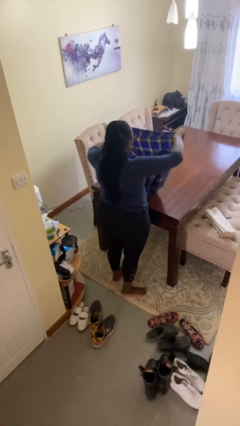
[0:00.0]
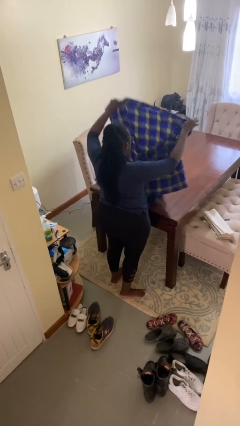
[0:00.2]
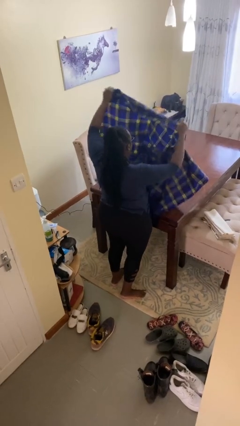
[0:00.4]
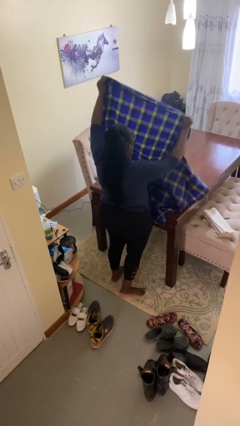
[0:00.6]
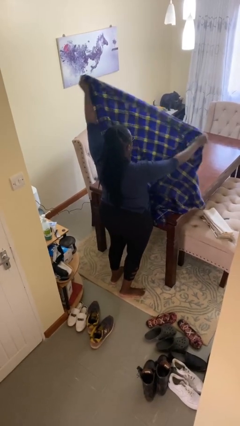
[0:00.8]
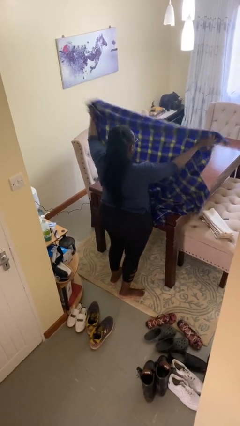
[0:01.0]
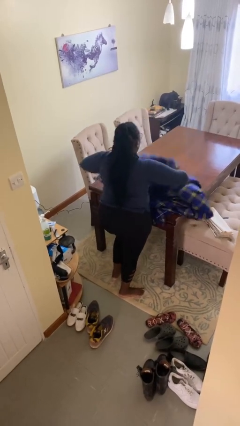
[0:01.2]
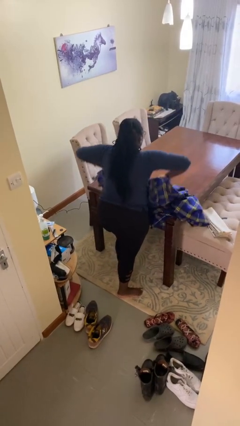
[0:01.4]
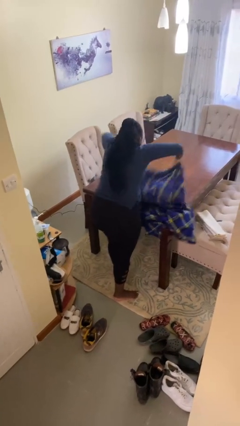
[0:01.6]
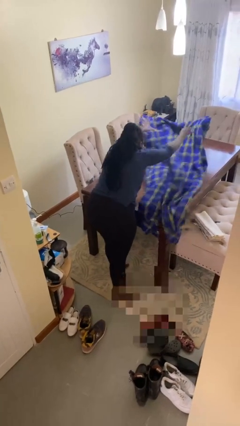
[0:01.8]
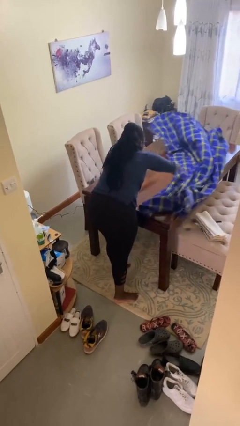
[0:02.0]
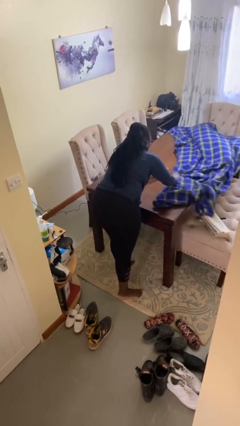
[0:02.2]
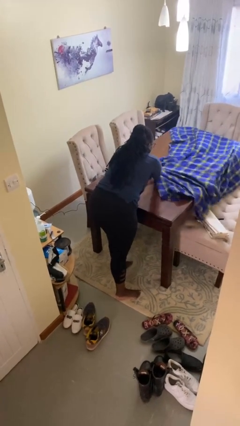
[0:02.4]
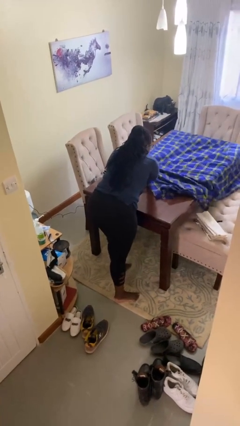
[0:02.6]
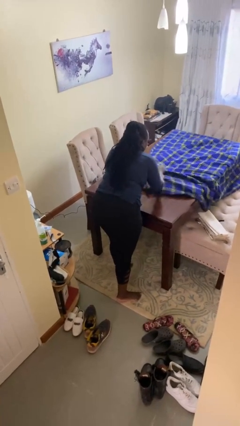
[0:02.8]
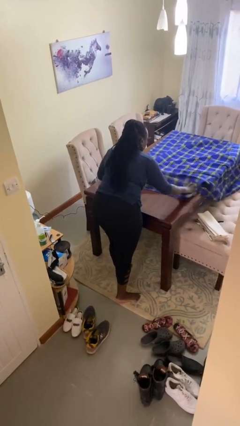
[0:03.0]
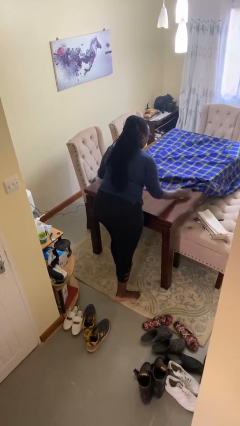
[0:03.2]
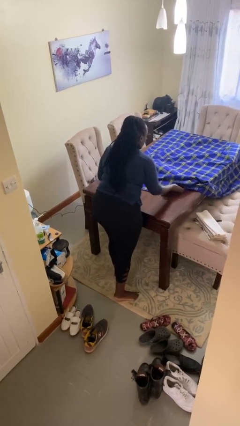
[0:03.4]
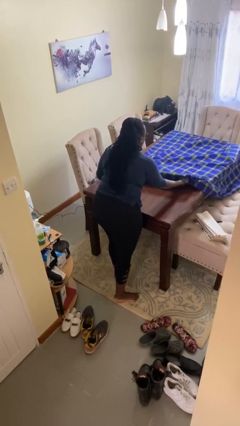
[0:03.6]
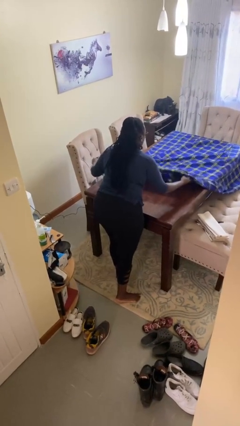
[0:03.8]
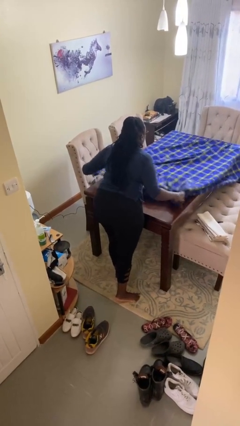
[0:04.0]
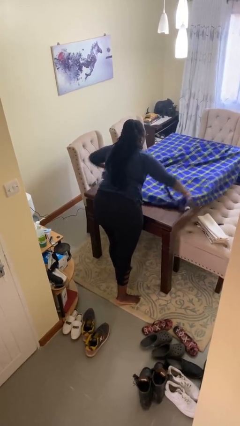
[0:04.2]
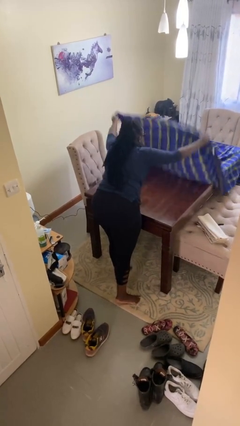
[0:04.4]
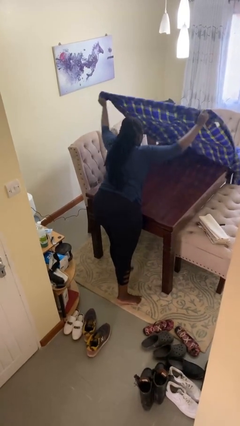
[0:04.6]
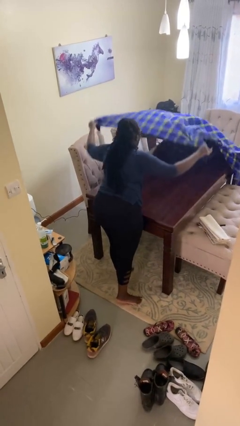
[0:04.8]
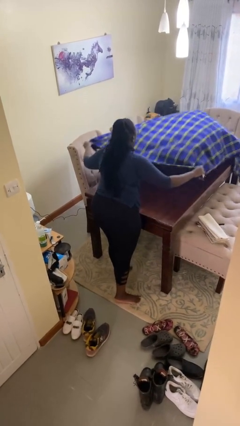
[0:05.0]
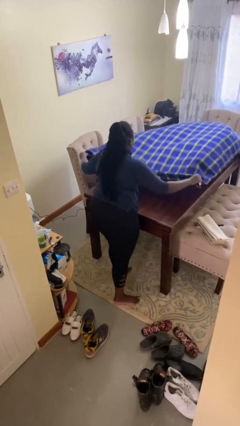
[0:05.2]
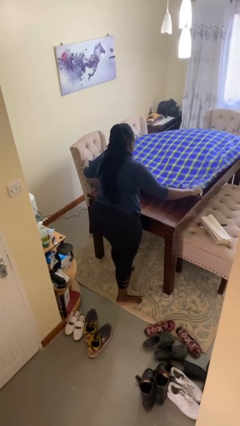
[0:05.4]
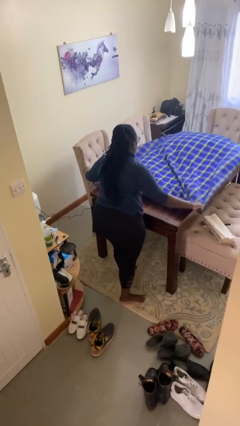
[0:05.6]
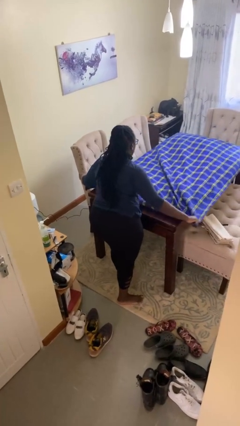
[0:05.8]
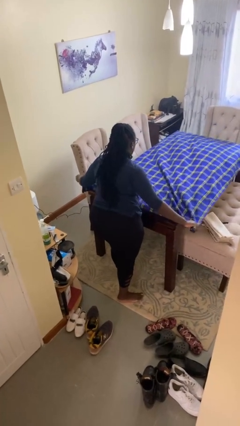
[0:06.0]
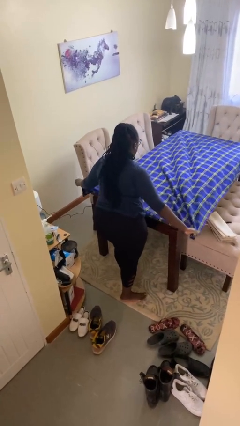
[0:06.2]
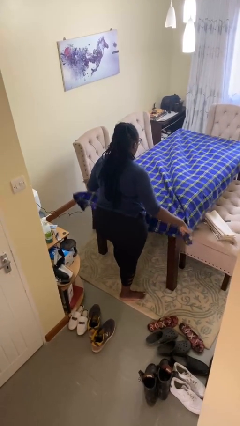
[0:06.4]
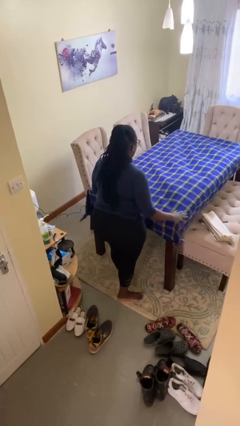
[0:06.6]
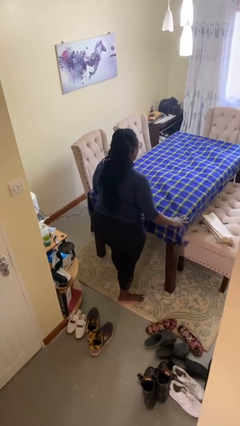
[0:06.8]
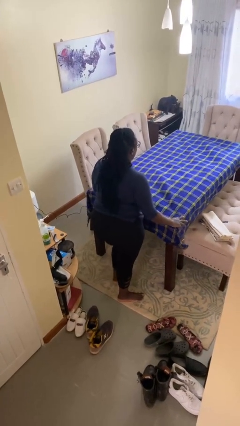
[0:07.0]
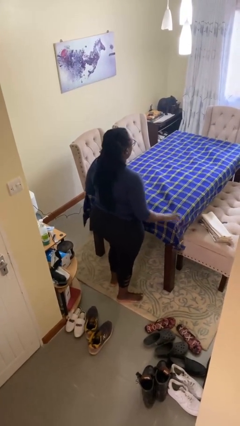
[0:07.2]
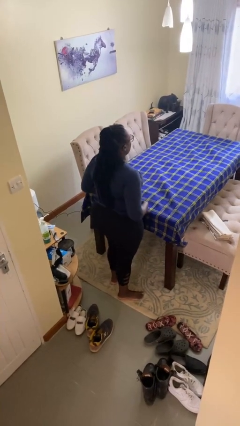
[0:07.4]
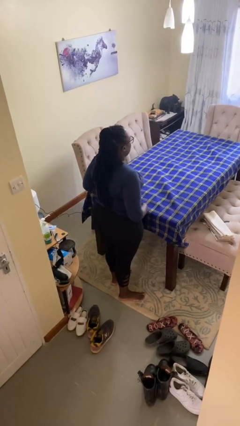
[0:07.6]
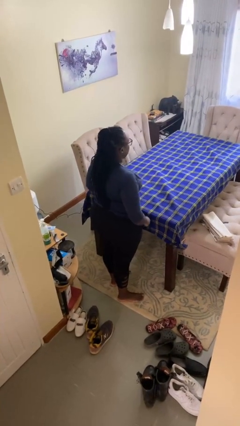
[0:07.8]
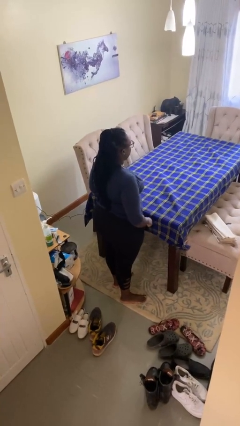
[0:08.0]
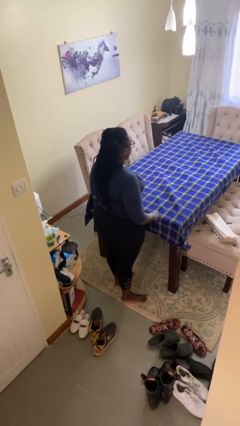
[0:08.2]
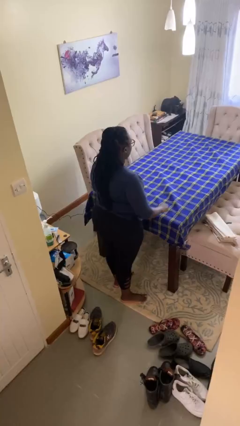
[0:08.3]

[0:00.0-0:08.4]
person spreads tablecloth

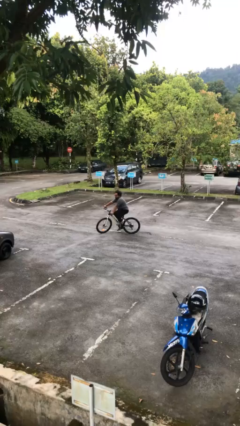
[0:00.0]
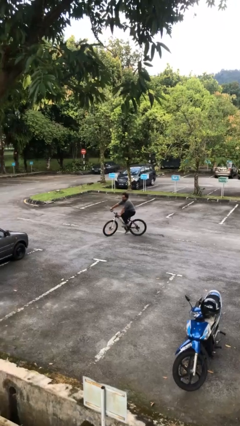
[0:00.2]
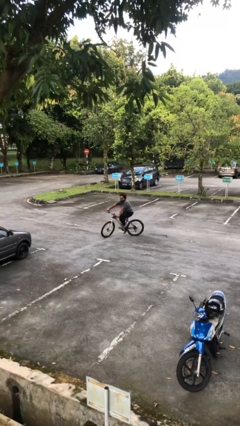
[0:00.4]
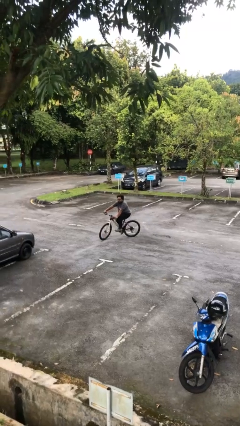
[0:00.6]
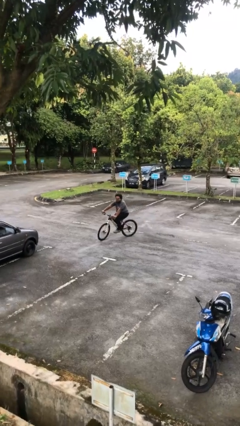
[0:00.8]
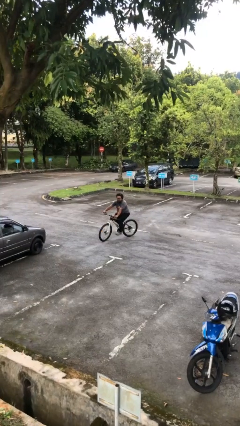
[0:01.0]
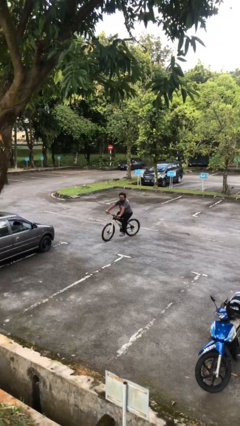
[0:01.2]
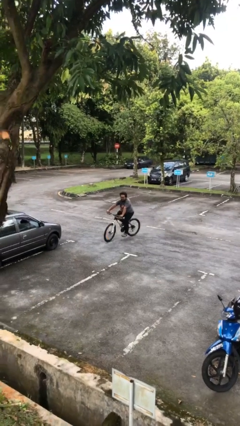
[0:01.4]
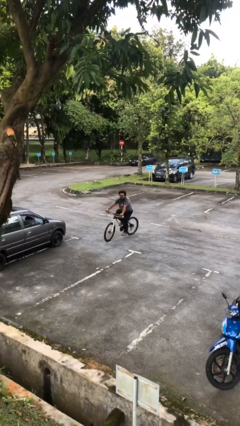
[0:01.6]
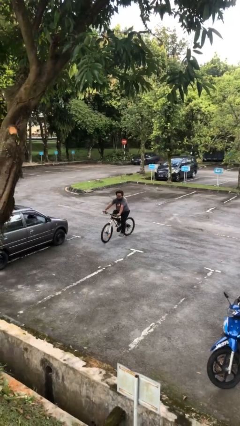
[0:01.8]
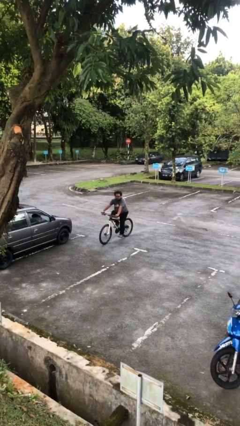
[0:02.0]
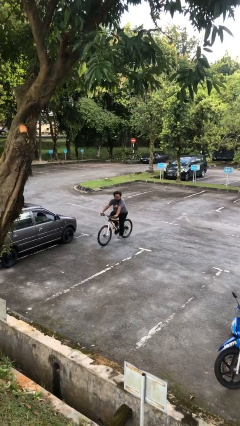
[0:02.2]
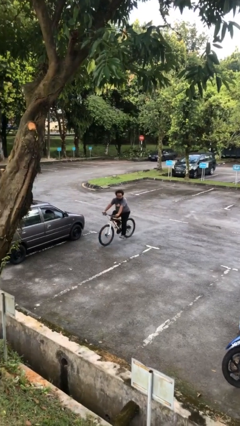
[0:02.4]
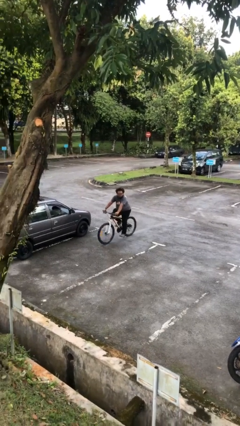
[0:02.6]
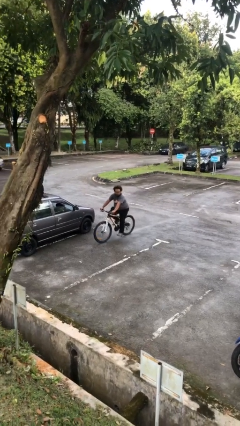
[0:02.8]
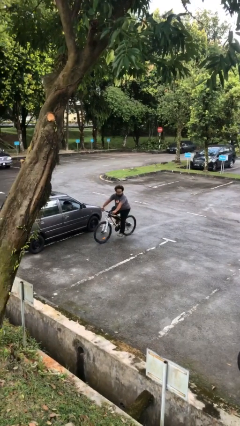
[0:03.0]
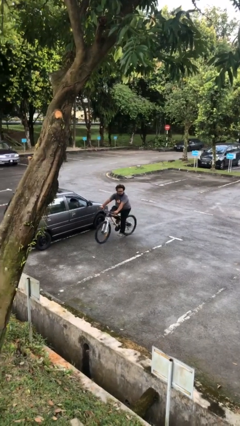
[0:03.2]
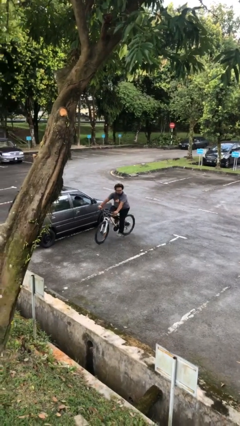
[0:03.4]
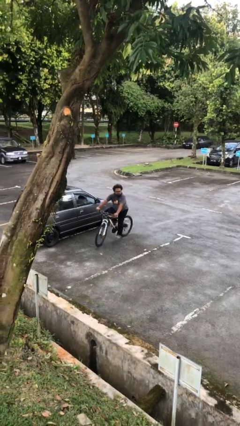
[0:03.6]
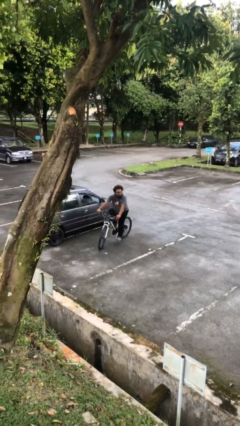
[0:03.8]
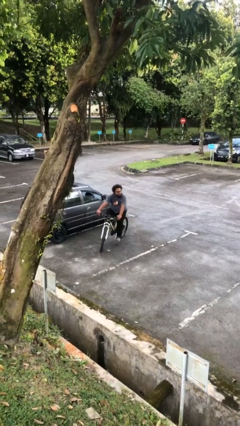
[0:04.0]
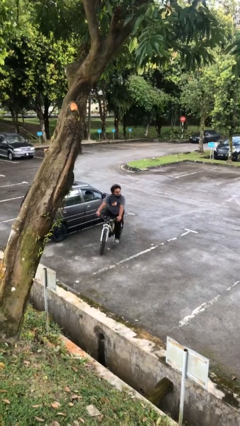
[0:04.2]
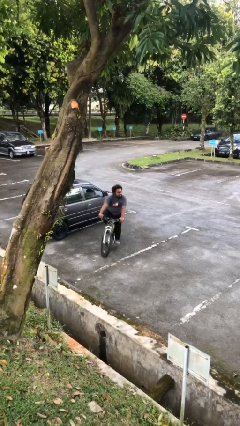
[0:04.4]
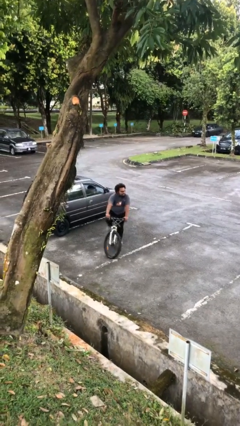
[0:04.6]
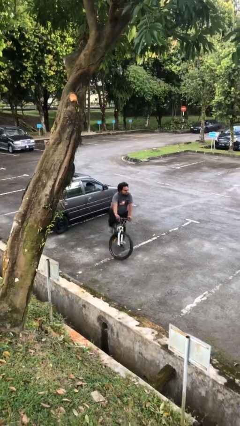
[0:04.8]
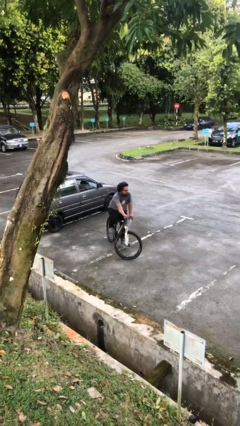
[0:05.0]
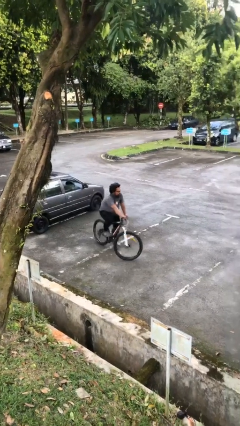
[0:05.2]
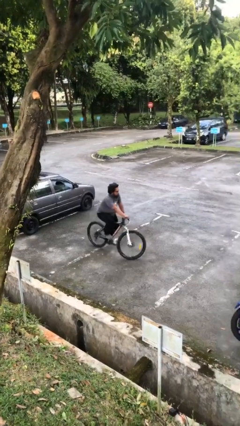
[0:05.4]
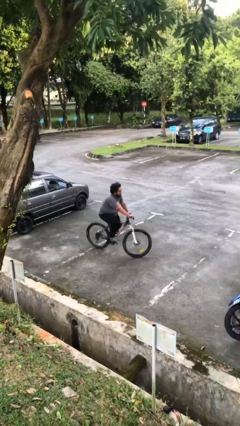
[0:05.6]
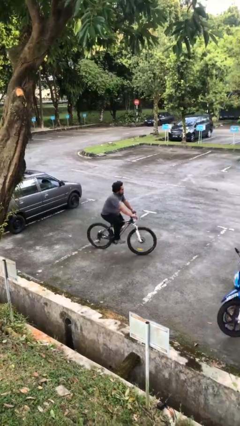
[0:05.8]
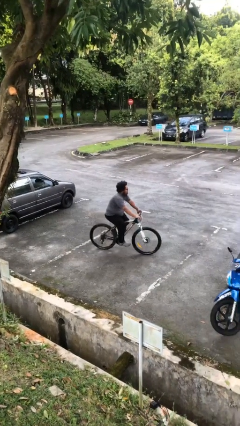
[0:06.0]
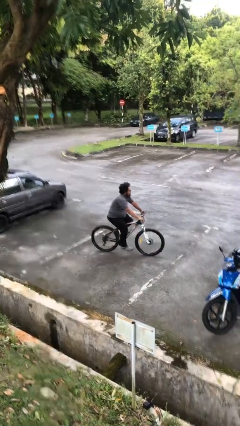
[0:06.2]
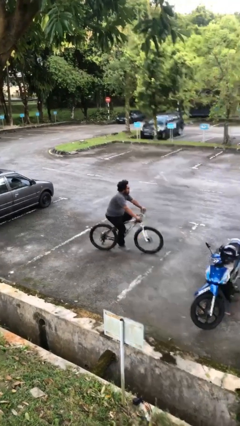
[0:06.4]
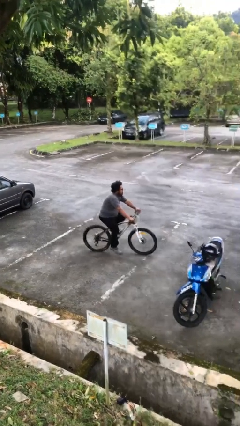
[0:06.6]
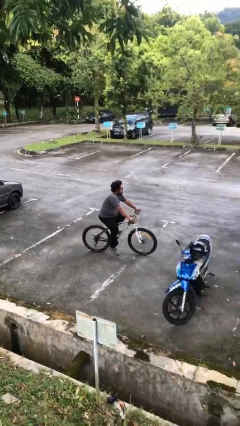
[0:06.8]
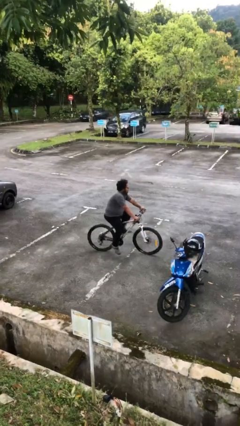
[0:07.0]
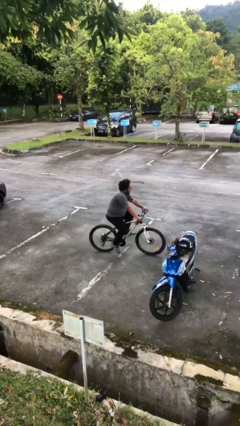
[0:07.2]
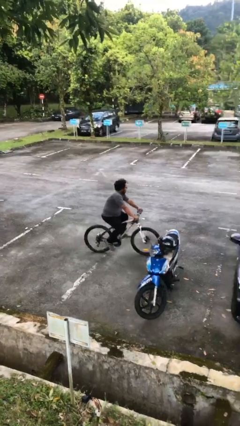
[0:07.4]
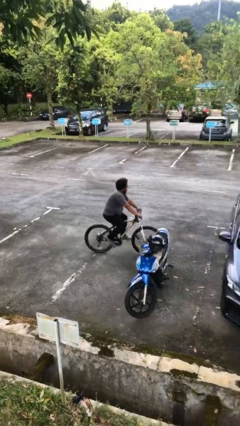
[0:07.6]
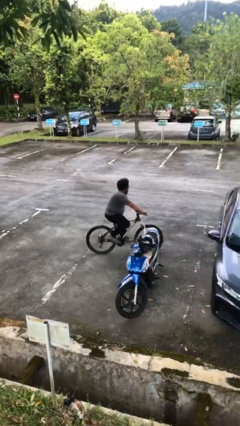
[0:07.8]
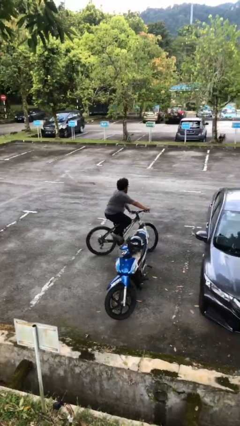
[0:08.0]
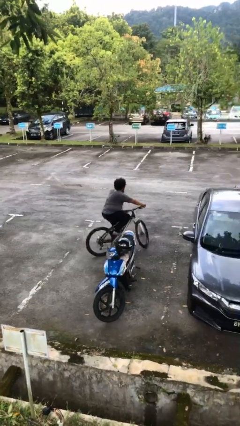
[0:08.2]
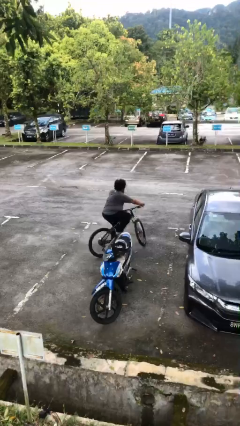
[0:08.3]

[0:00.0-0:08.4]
person rides bicycle

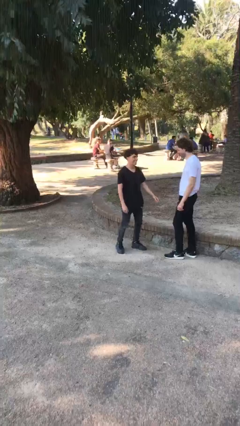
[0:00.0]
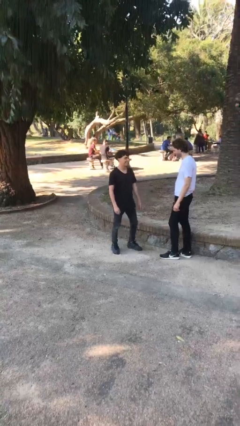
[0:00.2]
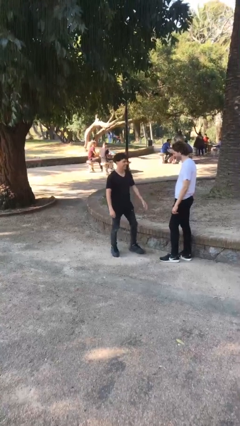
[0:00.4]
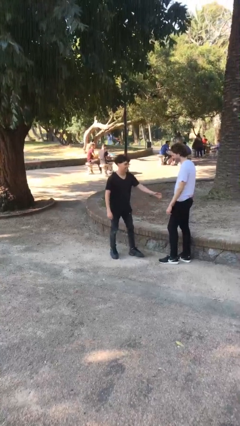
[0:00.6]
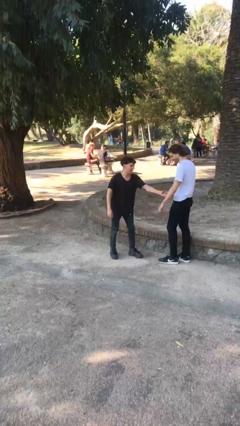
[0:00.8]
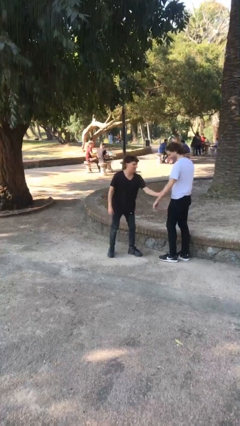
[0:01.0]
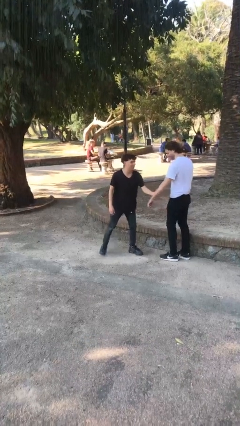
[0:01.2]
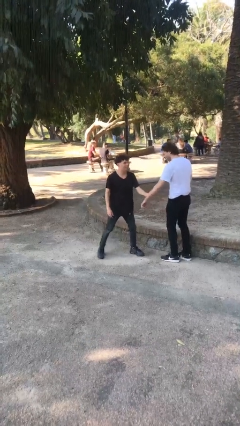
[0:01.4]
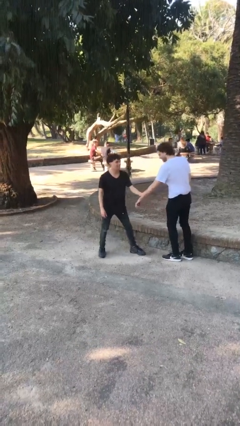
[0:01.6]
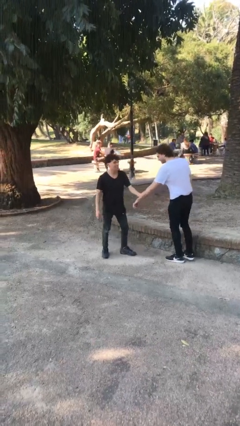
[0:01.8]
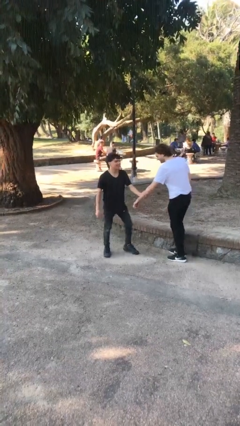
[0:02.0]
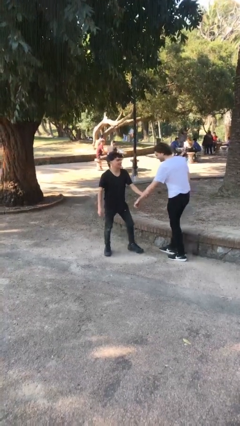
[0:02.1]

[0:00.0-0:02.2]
person grabs person by forearm
